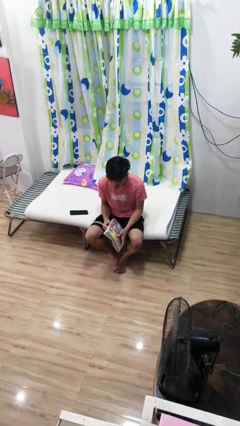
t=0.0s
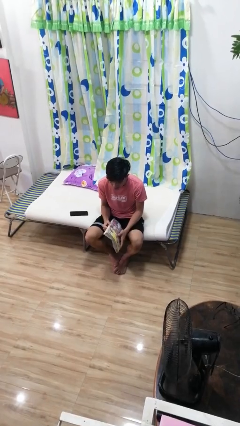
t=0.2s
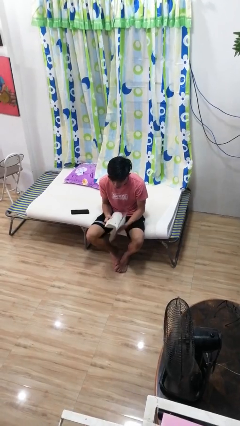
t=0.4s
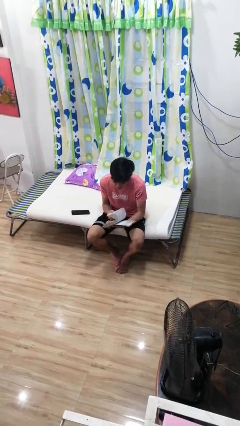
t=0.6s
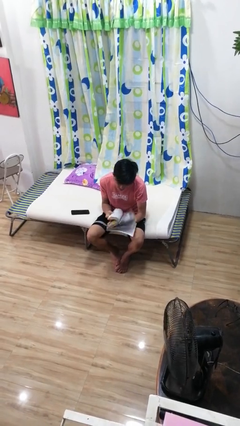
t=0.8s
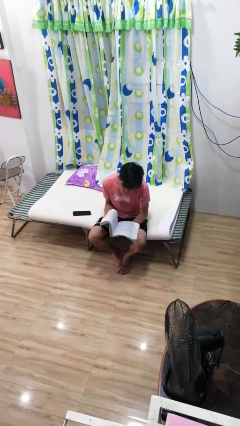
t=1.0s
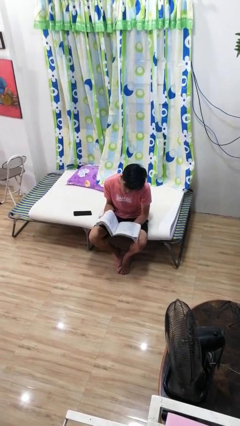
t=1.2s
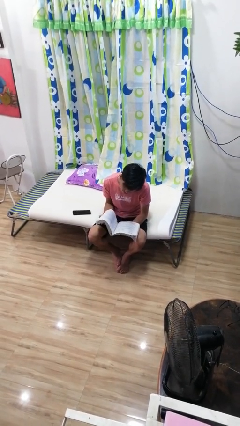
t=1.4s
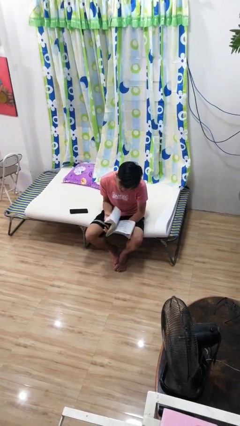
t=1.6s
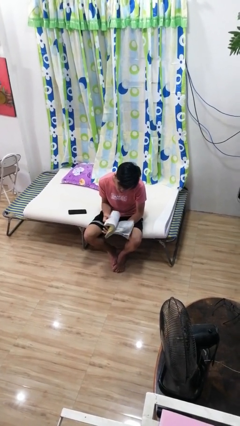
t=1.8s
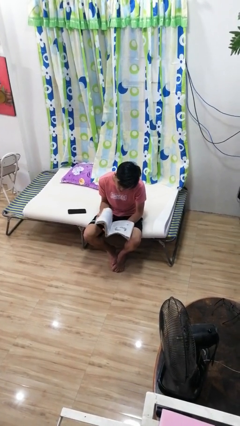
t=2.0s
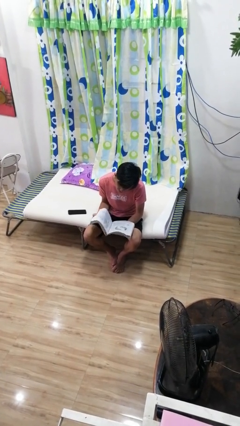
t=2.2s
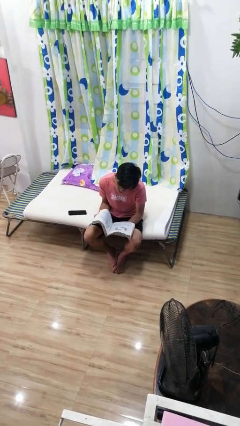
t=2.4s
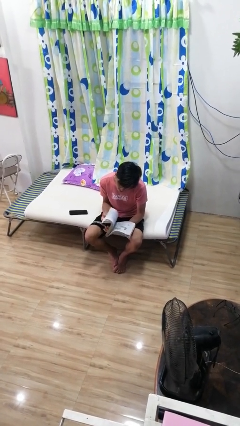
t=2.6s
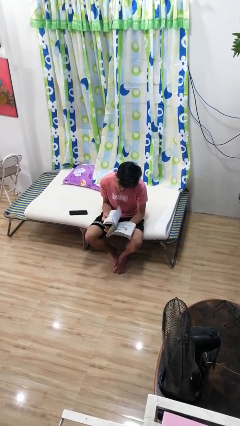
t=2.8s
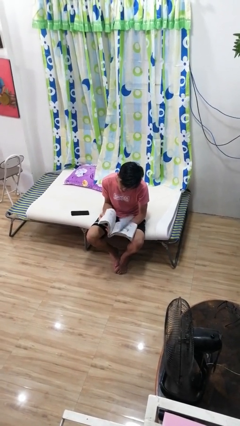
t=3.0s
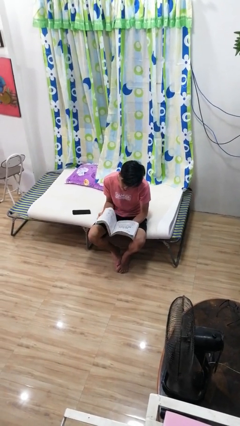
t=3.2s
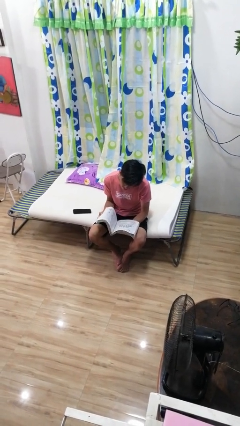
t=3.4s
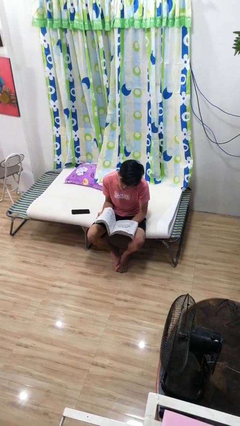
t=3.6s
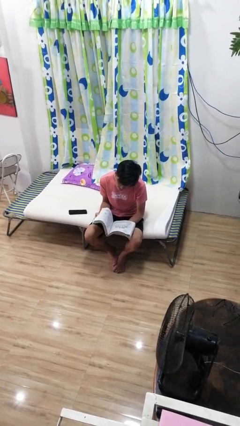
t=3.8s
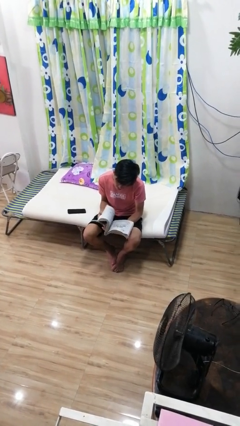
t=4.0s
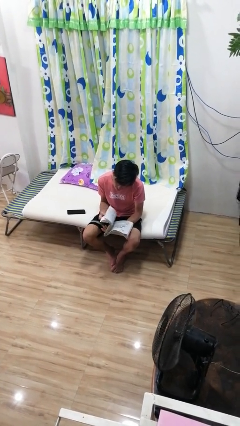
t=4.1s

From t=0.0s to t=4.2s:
person reads book

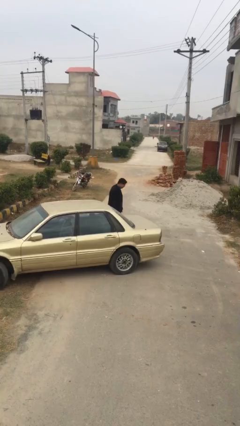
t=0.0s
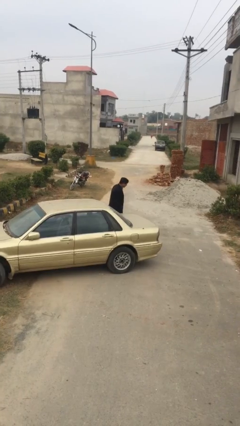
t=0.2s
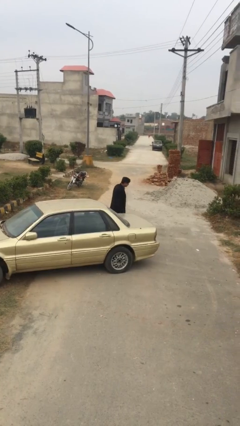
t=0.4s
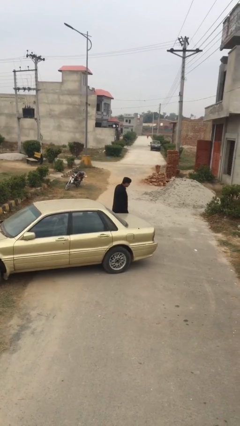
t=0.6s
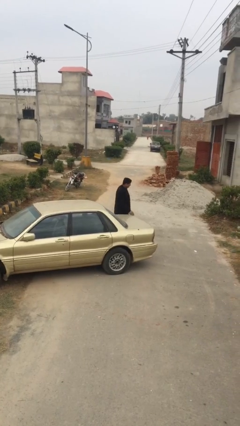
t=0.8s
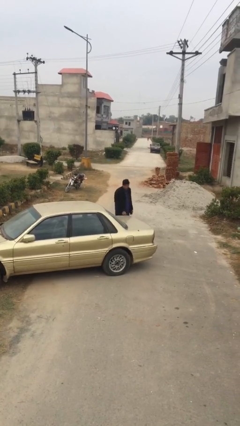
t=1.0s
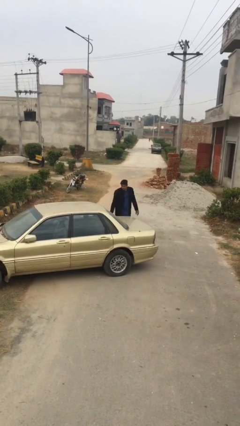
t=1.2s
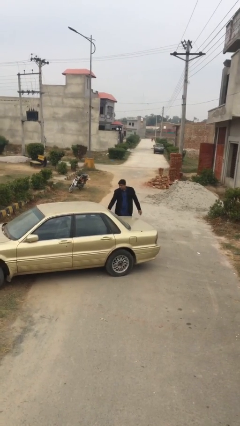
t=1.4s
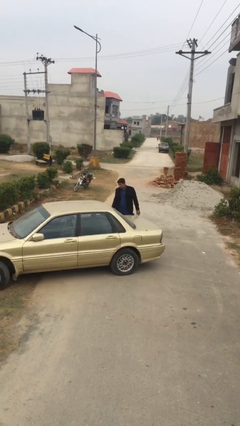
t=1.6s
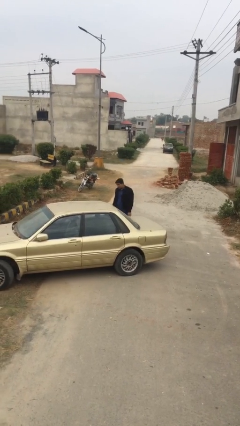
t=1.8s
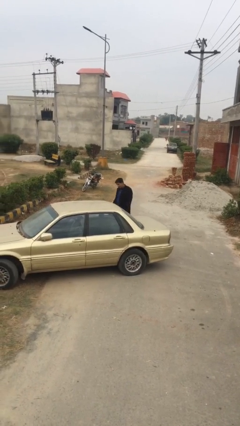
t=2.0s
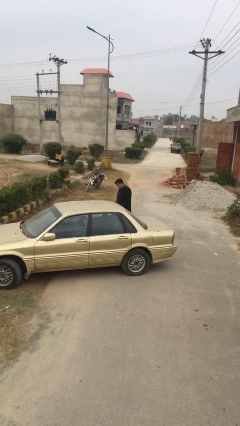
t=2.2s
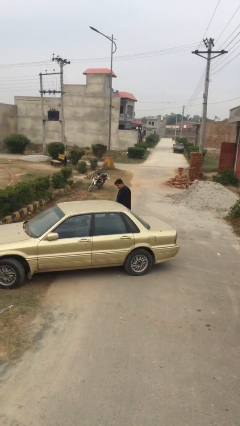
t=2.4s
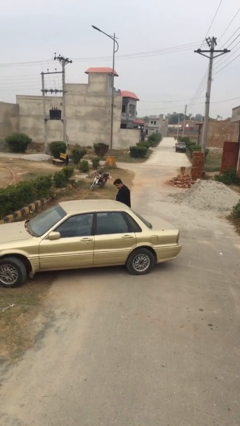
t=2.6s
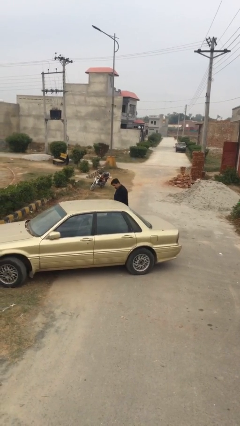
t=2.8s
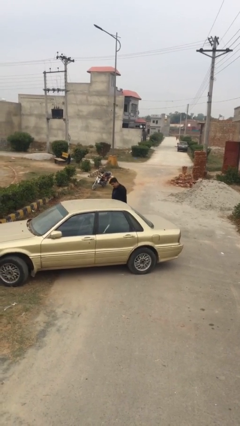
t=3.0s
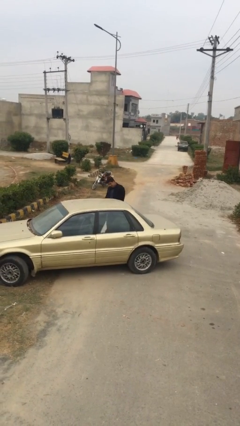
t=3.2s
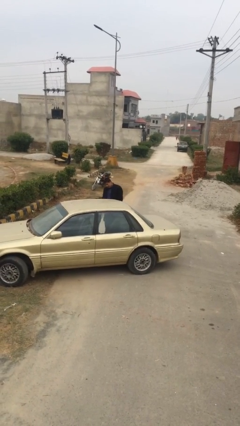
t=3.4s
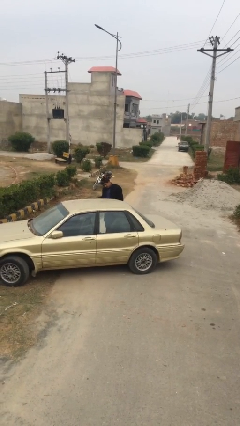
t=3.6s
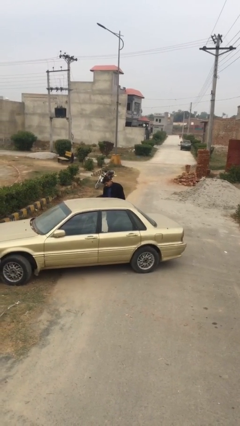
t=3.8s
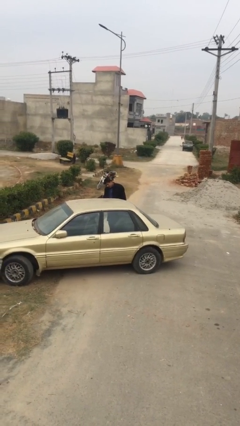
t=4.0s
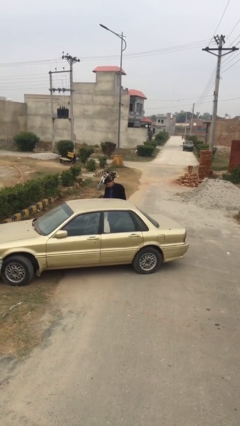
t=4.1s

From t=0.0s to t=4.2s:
person opens car door

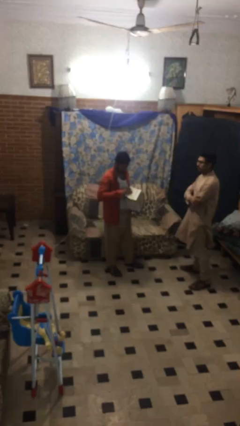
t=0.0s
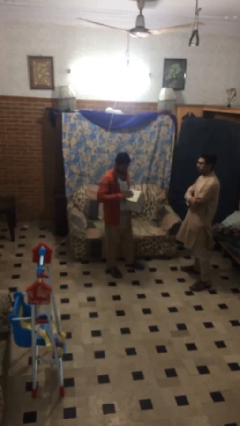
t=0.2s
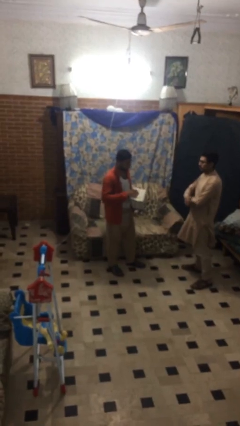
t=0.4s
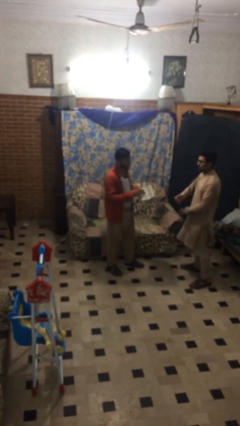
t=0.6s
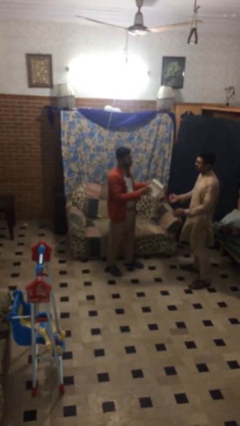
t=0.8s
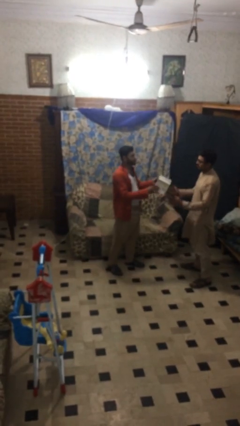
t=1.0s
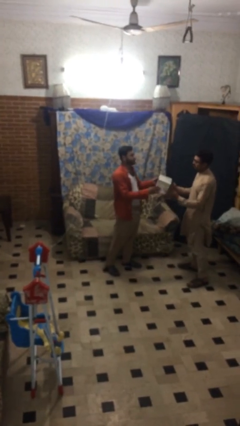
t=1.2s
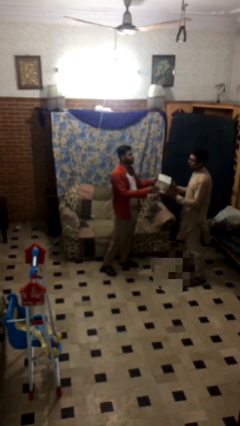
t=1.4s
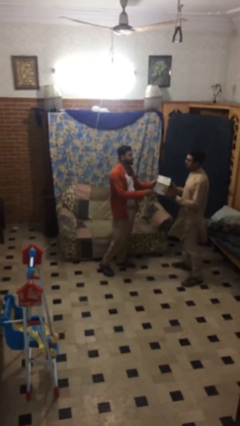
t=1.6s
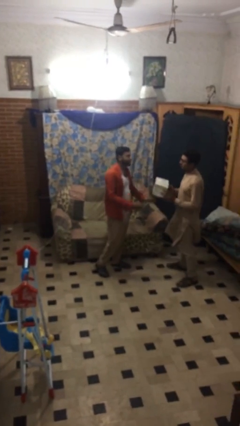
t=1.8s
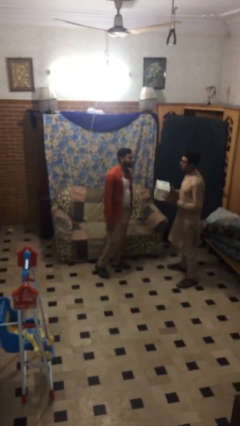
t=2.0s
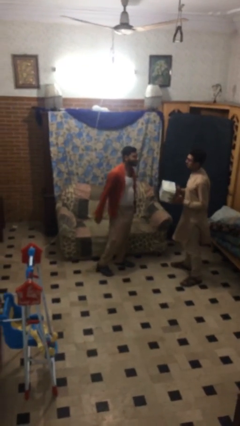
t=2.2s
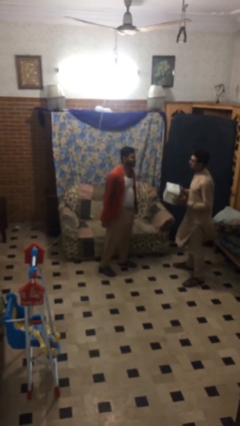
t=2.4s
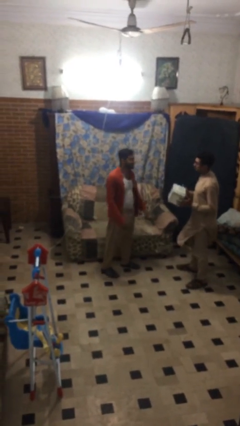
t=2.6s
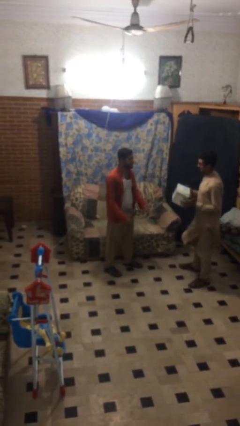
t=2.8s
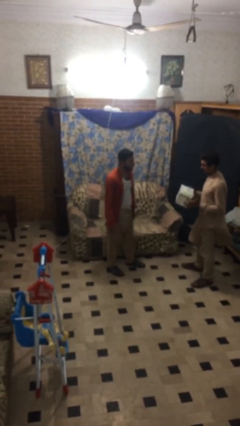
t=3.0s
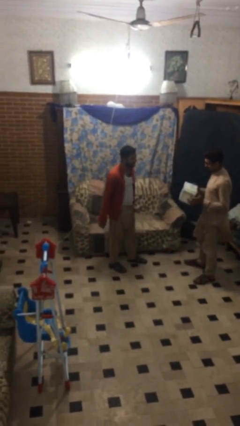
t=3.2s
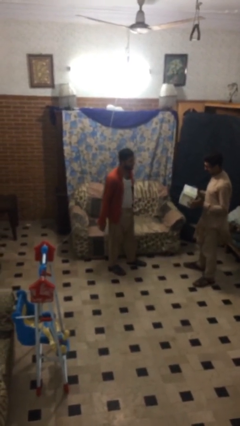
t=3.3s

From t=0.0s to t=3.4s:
person transfers object to person

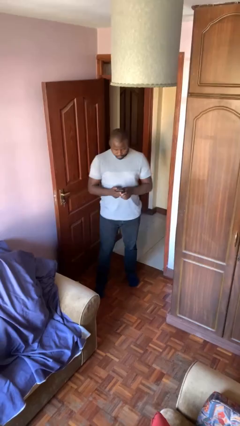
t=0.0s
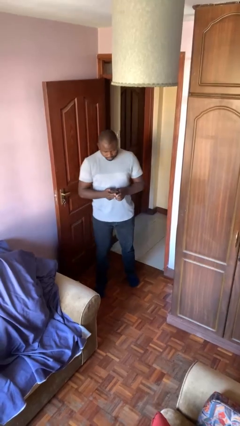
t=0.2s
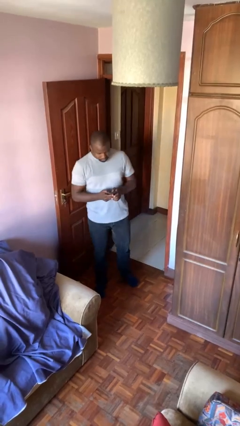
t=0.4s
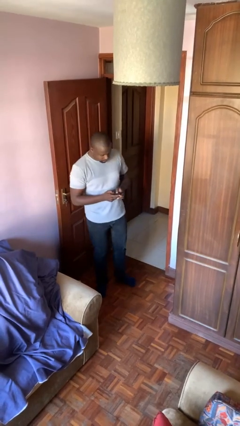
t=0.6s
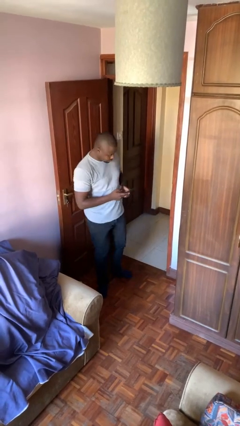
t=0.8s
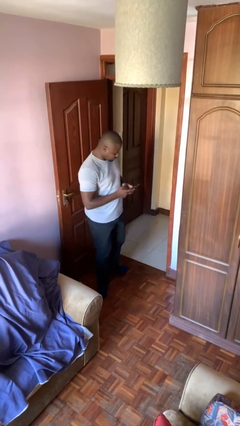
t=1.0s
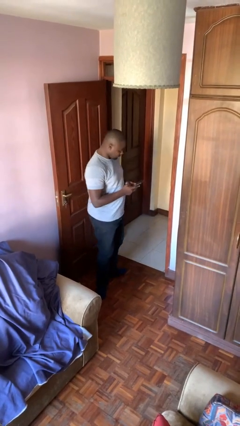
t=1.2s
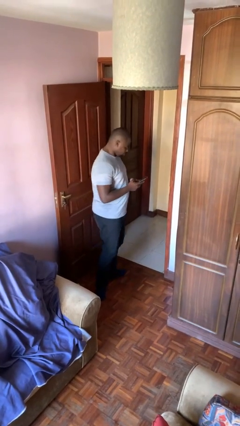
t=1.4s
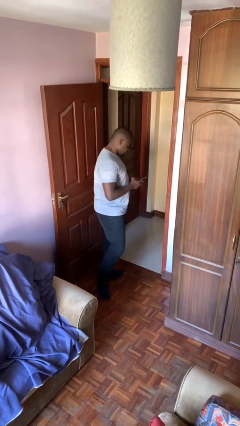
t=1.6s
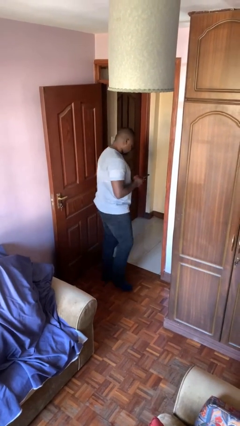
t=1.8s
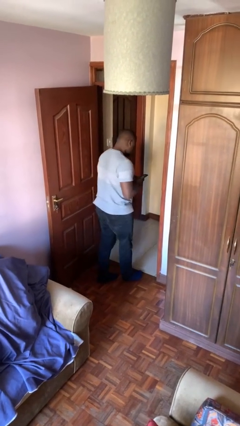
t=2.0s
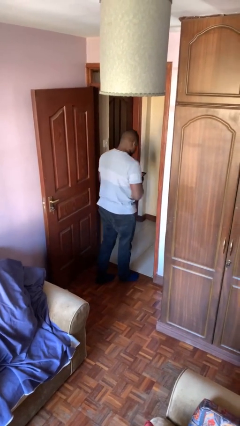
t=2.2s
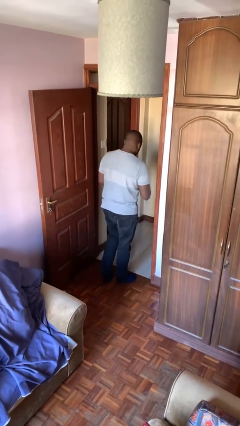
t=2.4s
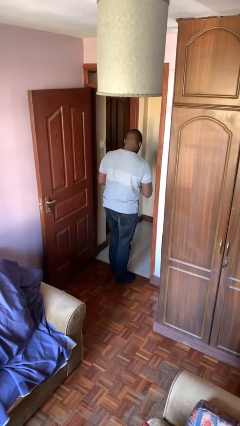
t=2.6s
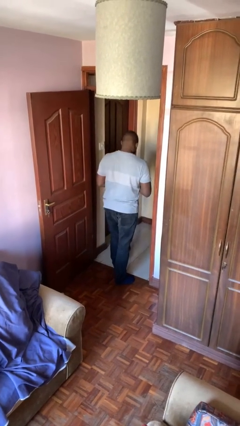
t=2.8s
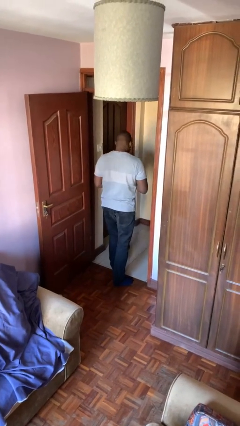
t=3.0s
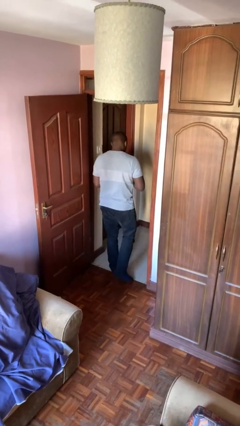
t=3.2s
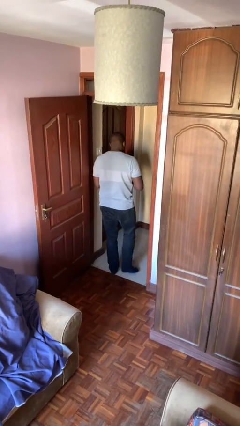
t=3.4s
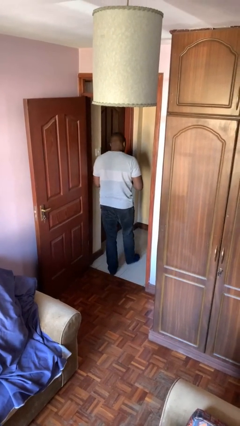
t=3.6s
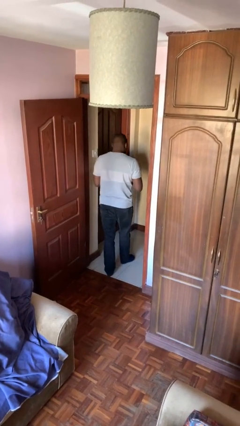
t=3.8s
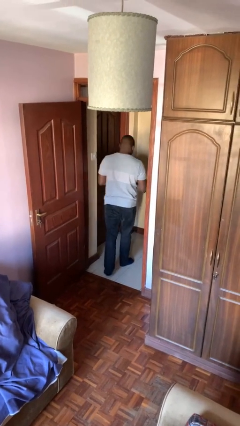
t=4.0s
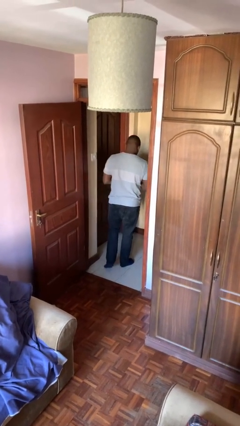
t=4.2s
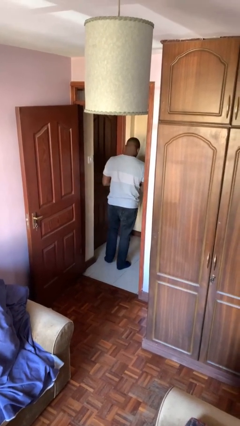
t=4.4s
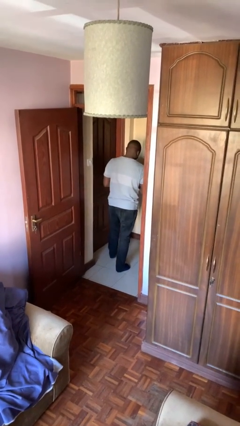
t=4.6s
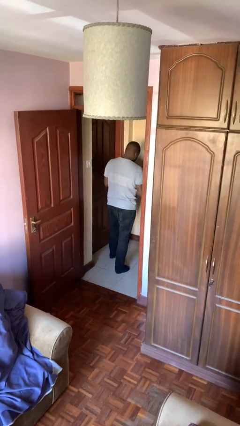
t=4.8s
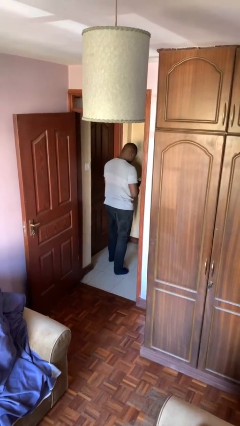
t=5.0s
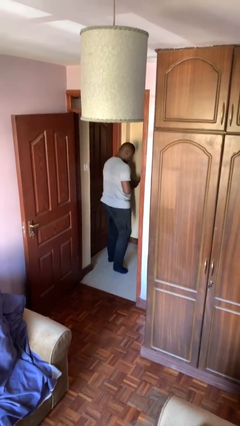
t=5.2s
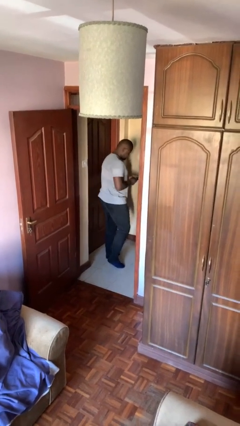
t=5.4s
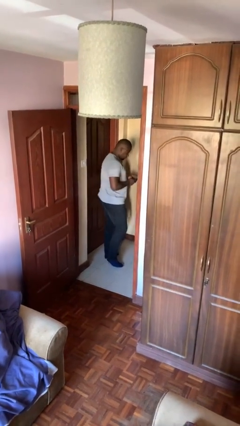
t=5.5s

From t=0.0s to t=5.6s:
person exits scene through structure

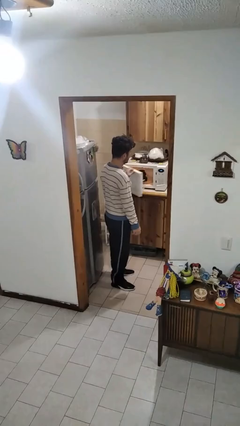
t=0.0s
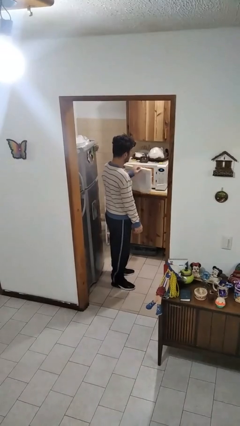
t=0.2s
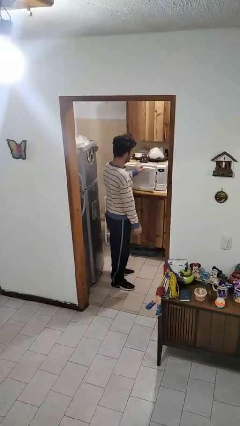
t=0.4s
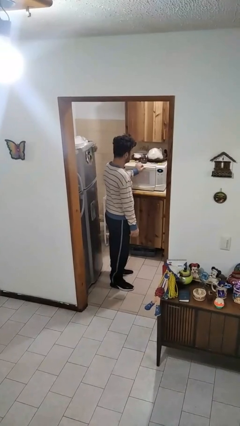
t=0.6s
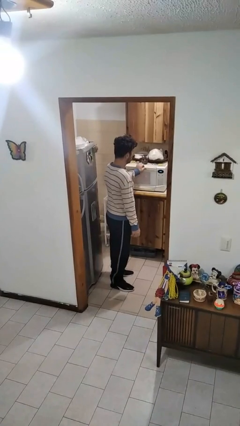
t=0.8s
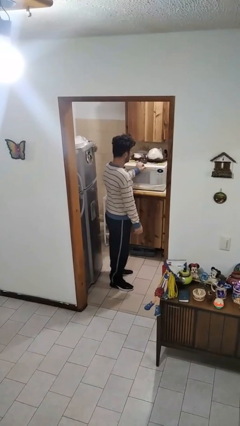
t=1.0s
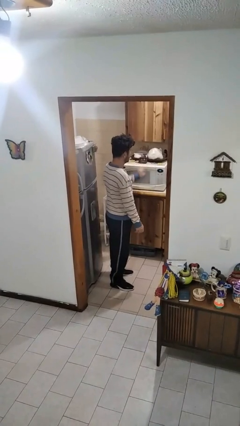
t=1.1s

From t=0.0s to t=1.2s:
person closes microwave
